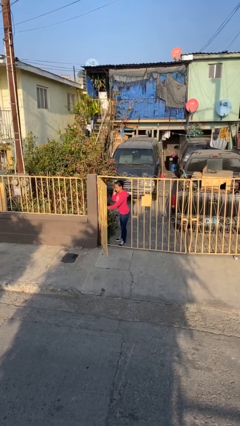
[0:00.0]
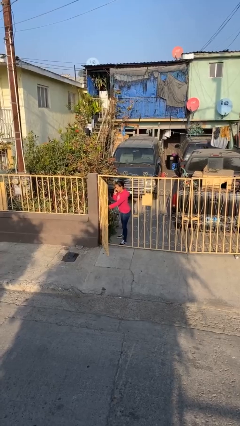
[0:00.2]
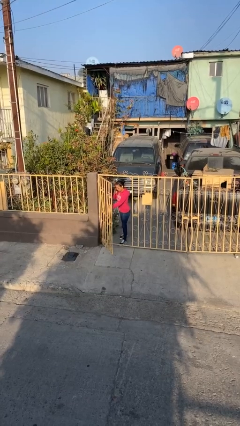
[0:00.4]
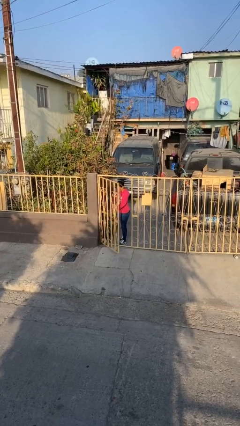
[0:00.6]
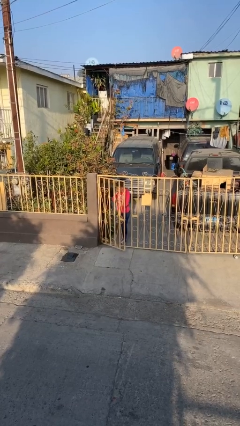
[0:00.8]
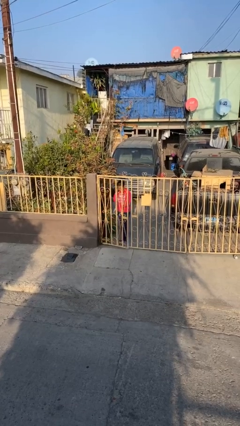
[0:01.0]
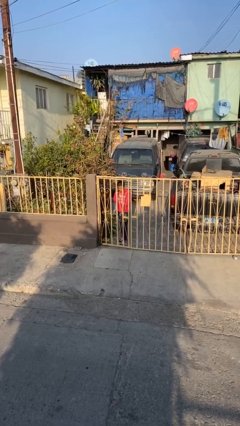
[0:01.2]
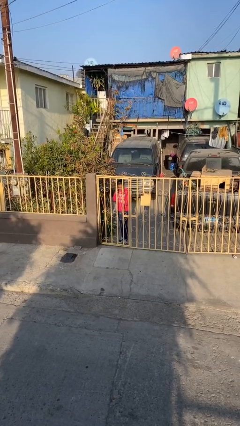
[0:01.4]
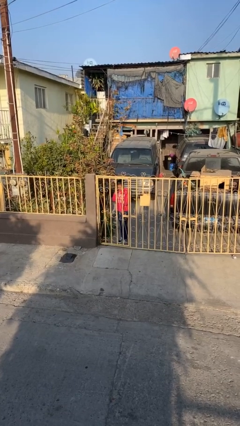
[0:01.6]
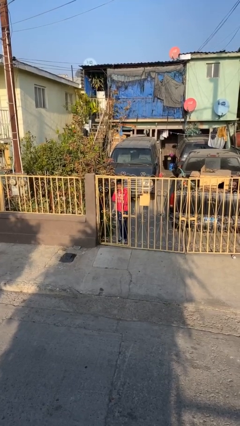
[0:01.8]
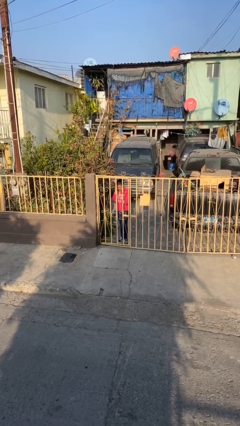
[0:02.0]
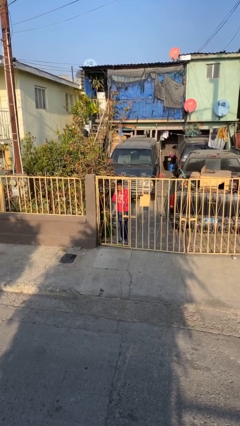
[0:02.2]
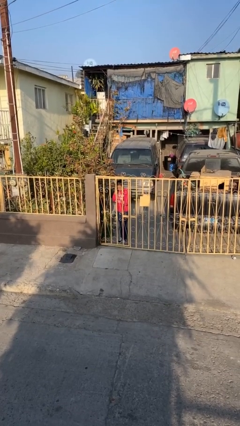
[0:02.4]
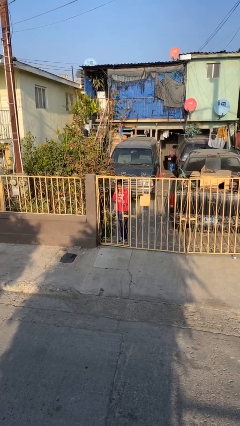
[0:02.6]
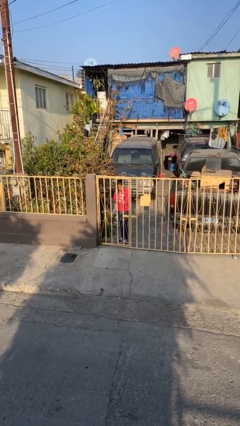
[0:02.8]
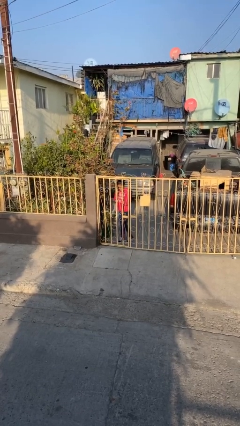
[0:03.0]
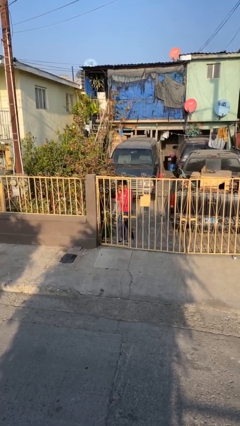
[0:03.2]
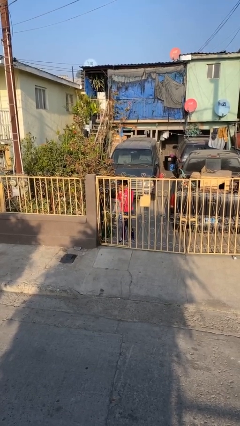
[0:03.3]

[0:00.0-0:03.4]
person closes facility door

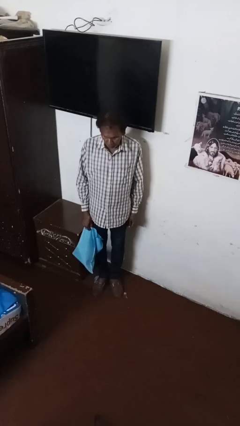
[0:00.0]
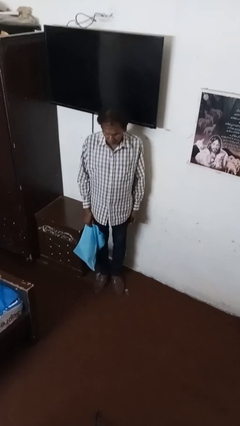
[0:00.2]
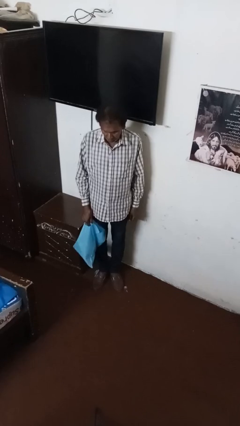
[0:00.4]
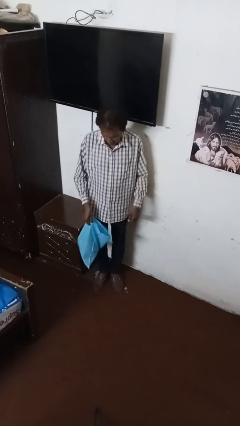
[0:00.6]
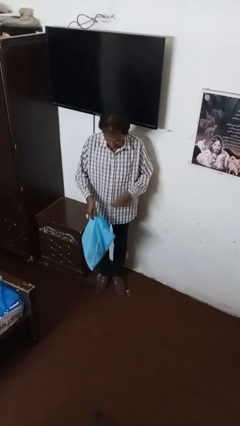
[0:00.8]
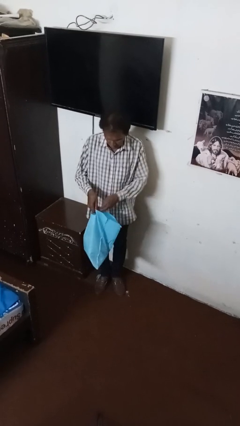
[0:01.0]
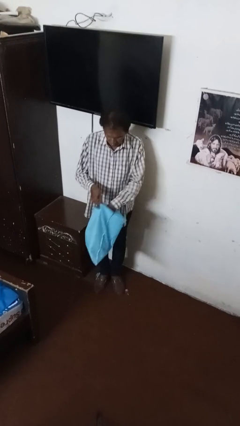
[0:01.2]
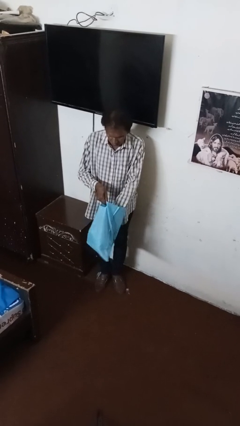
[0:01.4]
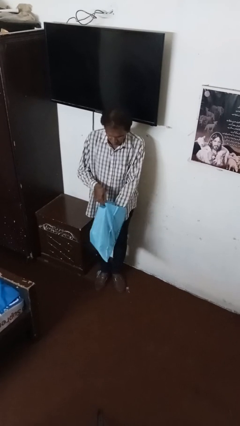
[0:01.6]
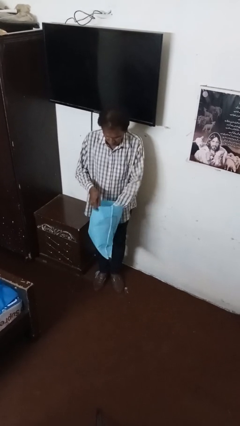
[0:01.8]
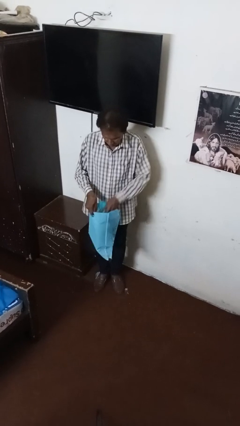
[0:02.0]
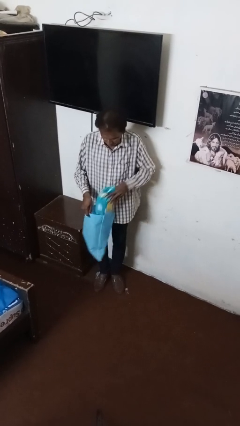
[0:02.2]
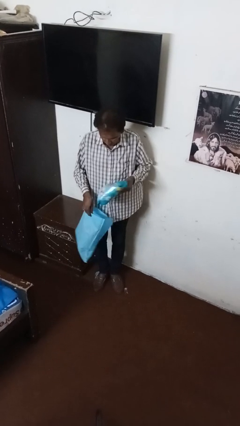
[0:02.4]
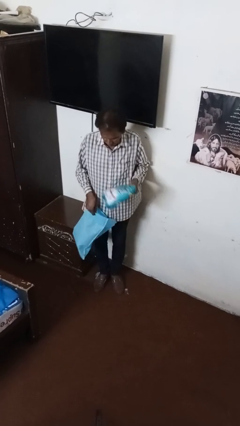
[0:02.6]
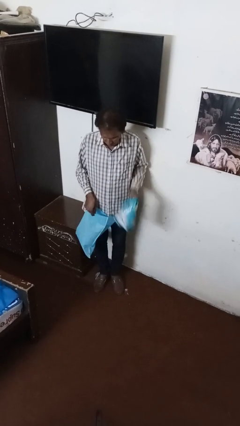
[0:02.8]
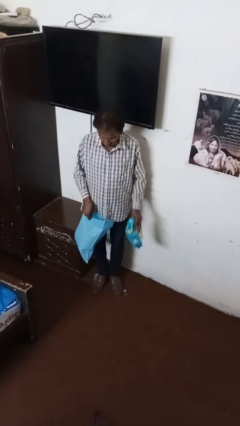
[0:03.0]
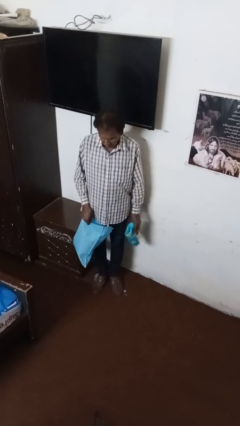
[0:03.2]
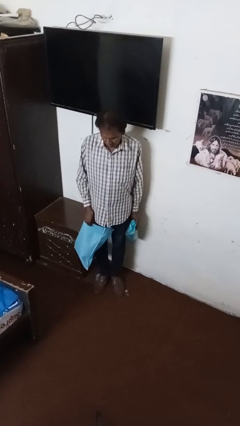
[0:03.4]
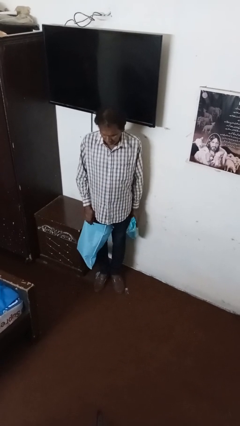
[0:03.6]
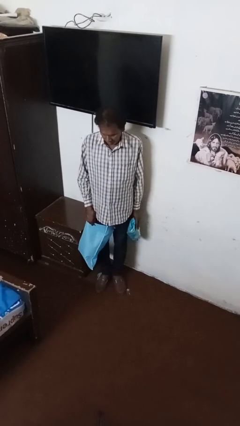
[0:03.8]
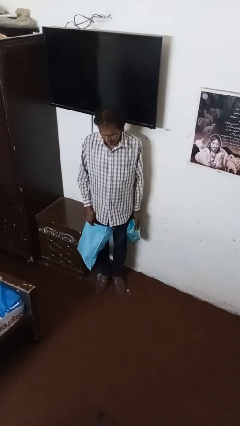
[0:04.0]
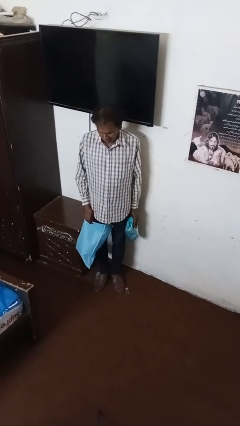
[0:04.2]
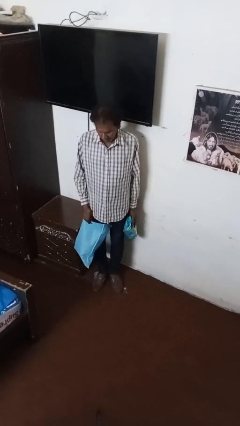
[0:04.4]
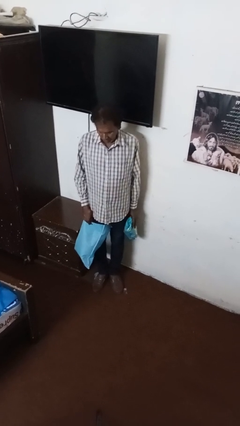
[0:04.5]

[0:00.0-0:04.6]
person searches in bag

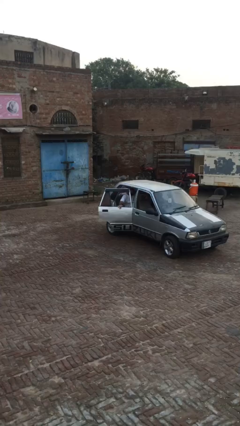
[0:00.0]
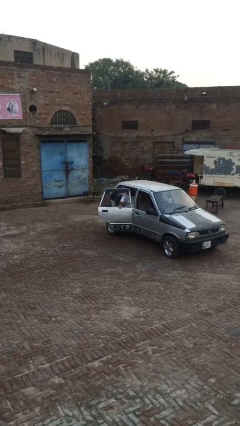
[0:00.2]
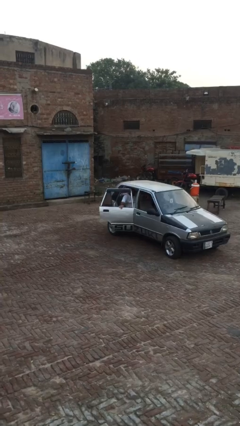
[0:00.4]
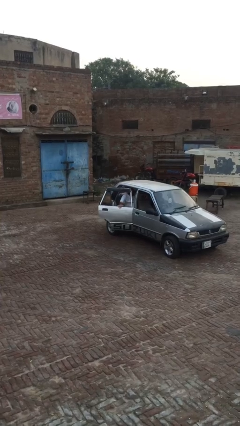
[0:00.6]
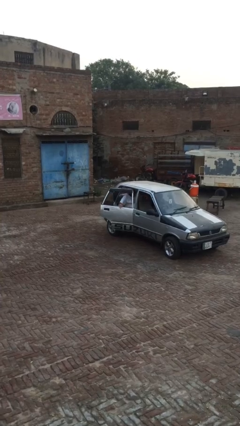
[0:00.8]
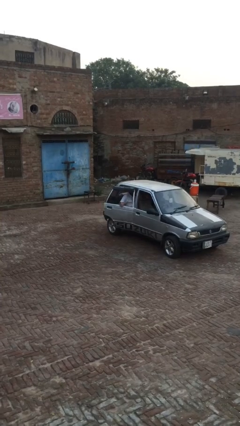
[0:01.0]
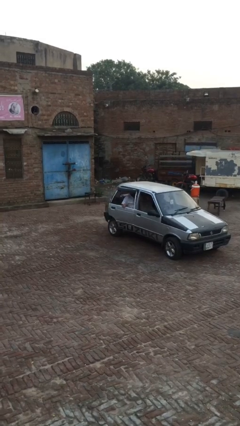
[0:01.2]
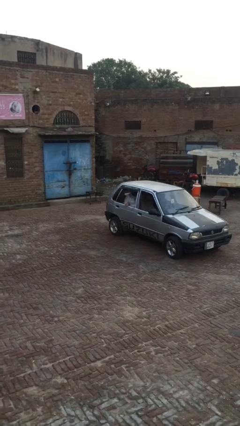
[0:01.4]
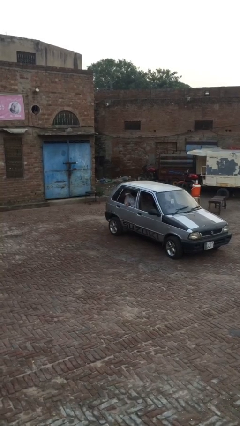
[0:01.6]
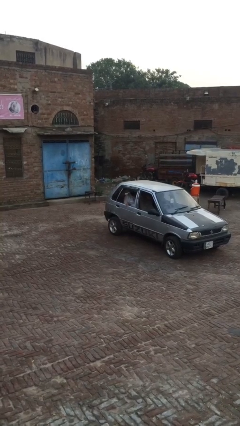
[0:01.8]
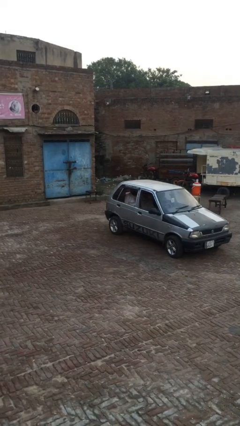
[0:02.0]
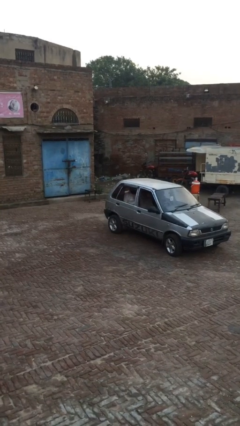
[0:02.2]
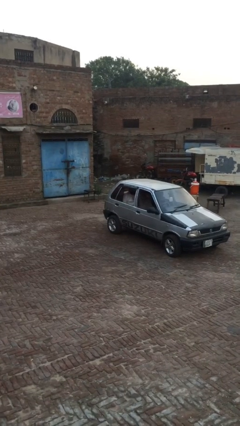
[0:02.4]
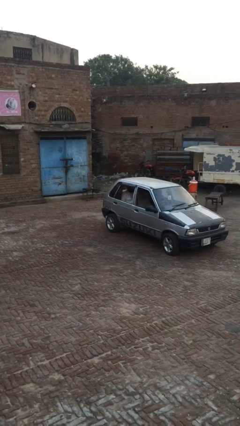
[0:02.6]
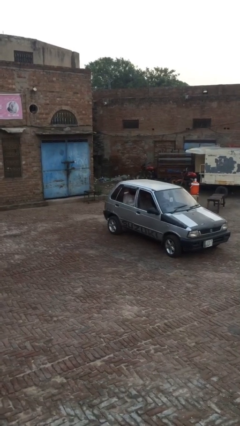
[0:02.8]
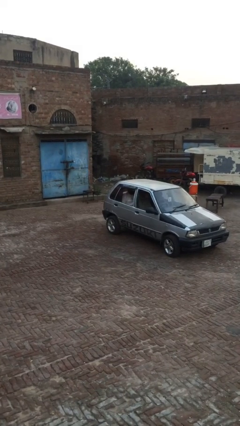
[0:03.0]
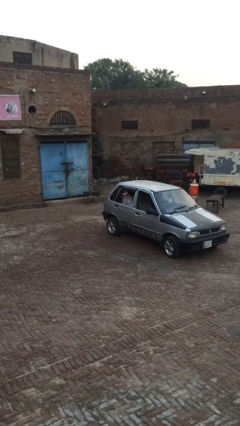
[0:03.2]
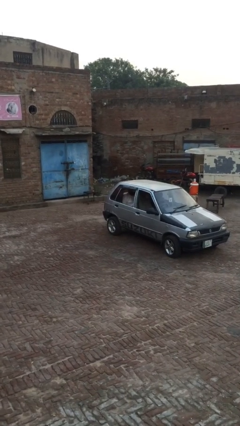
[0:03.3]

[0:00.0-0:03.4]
person closes car door

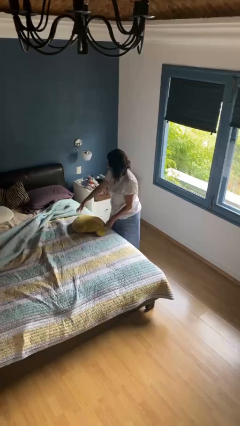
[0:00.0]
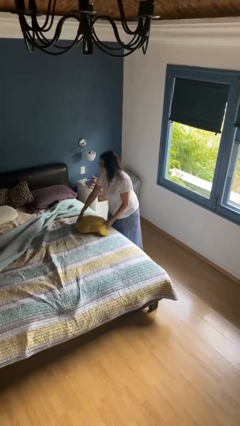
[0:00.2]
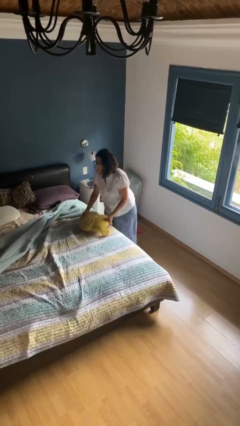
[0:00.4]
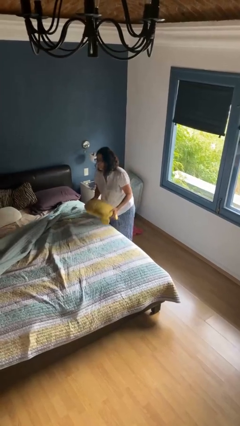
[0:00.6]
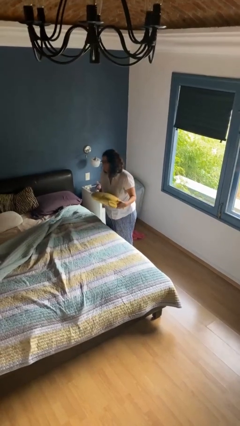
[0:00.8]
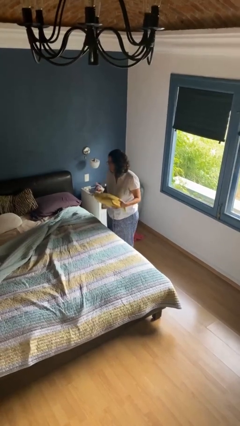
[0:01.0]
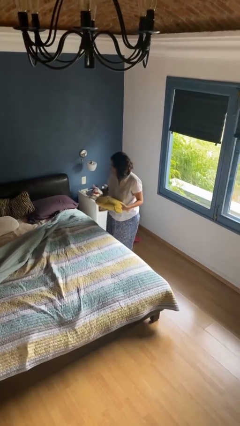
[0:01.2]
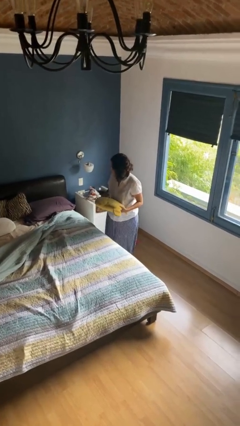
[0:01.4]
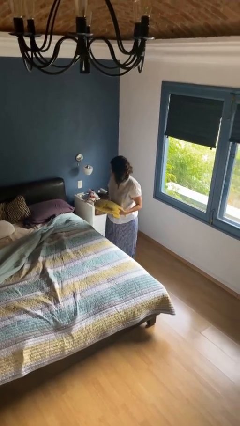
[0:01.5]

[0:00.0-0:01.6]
person picks up object from bed

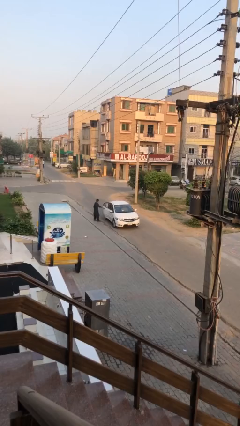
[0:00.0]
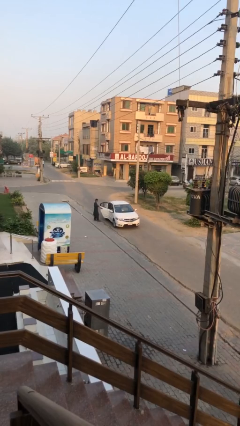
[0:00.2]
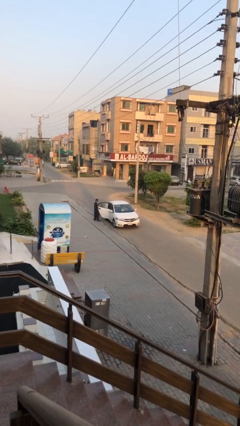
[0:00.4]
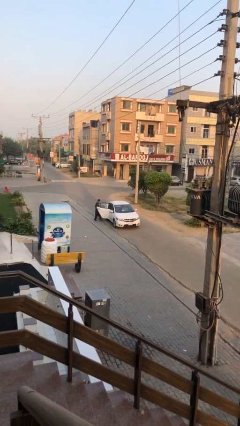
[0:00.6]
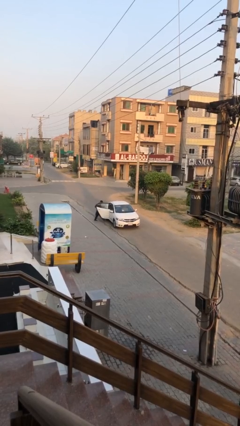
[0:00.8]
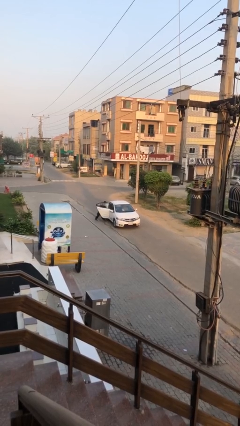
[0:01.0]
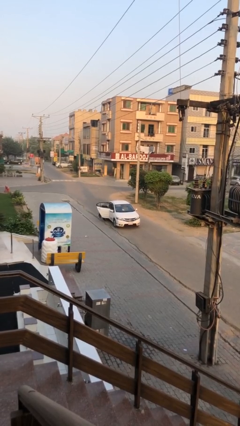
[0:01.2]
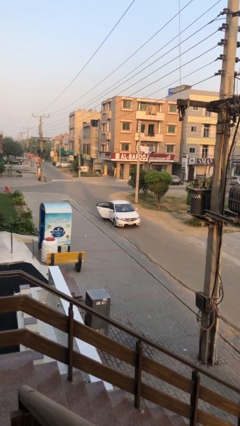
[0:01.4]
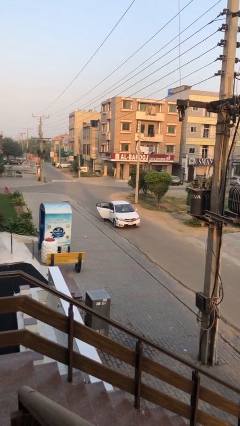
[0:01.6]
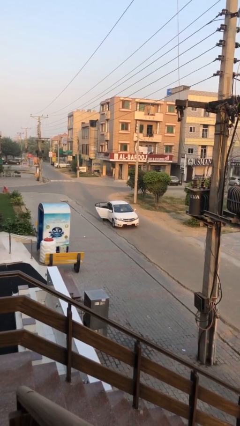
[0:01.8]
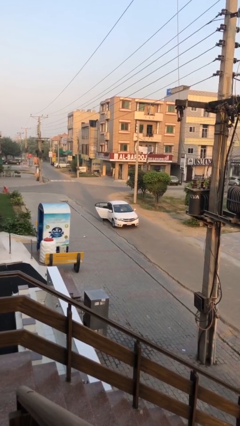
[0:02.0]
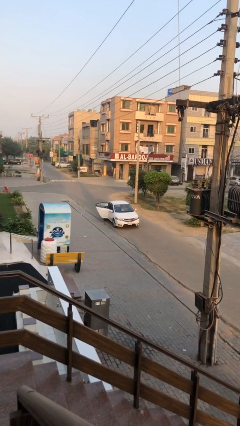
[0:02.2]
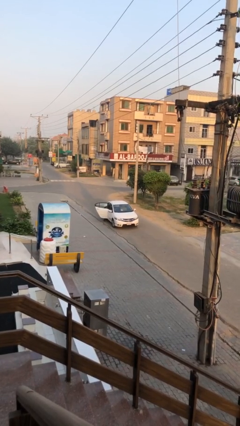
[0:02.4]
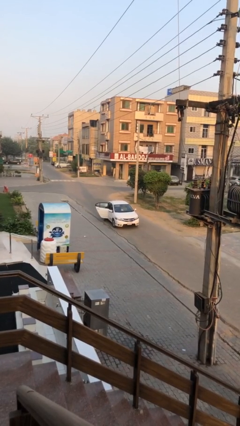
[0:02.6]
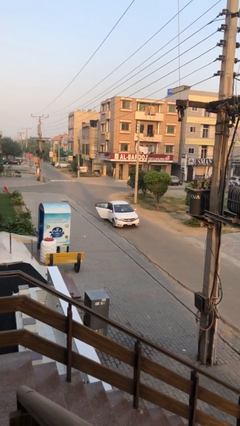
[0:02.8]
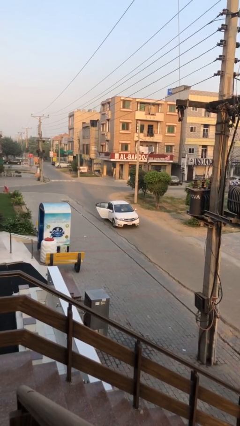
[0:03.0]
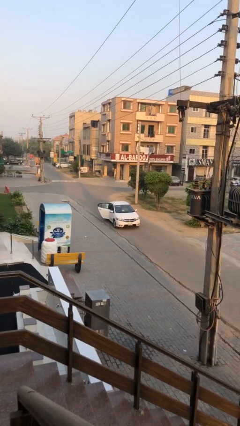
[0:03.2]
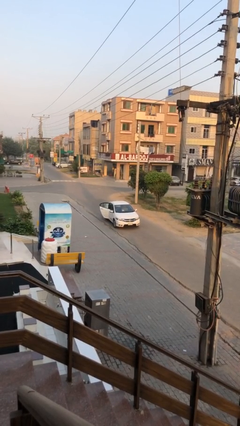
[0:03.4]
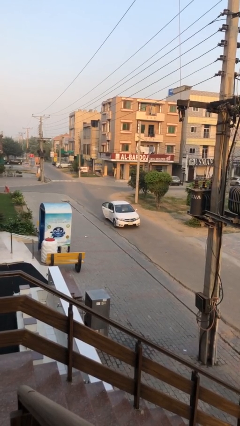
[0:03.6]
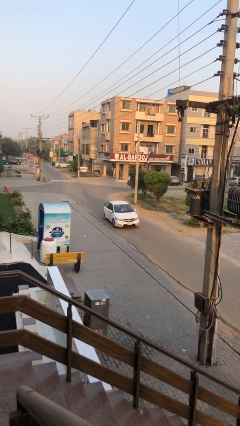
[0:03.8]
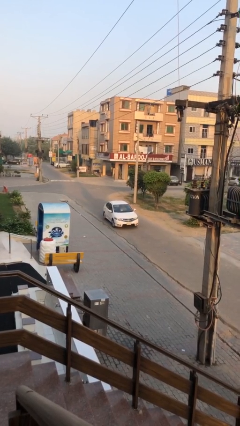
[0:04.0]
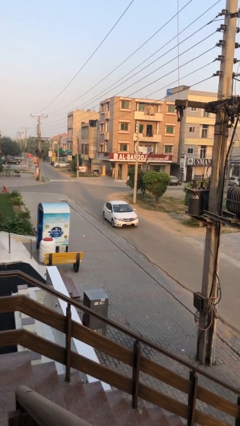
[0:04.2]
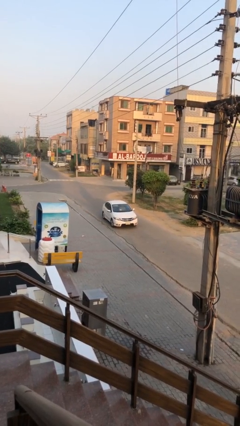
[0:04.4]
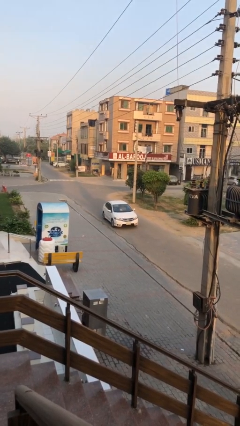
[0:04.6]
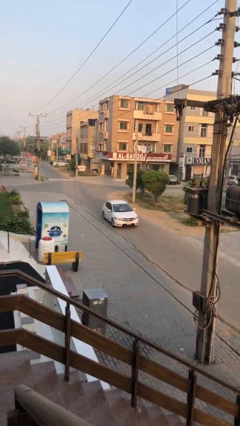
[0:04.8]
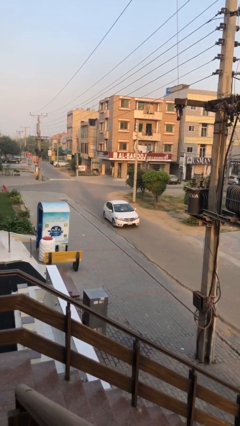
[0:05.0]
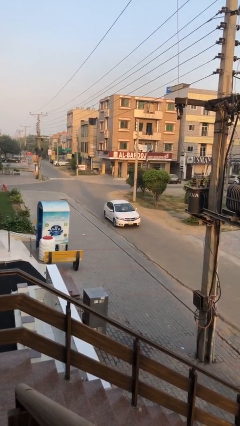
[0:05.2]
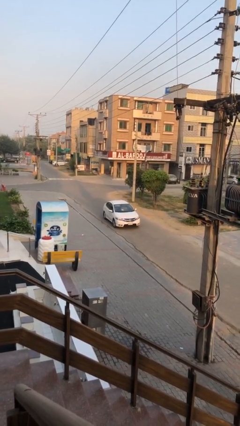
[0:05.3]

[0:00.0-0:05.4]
car picks up person
